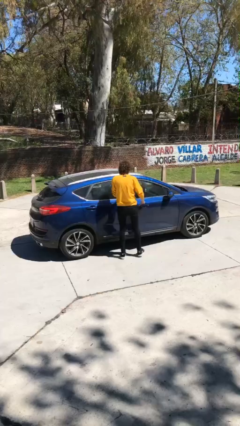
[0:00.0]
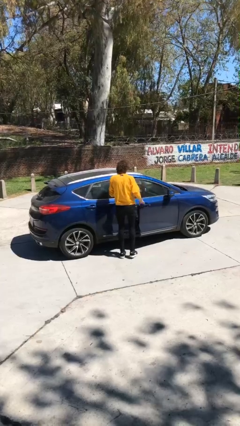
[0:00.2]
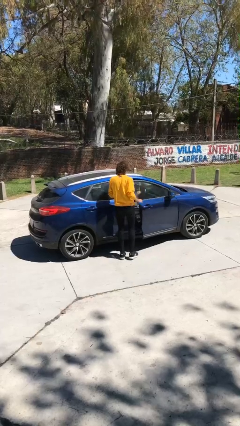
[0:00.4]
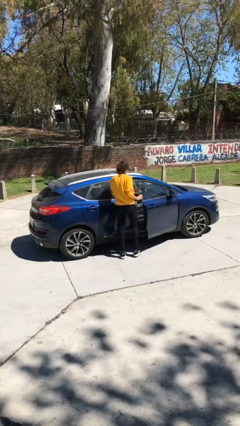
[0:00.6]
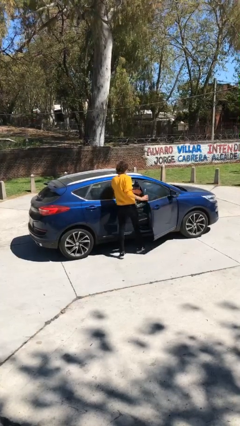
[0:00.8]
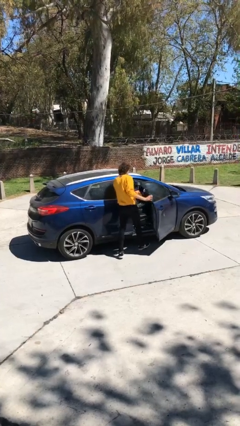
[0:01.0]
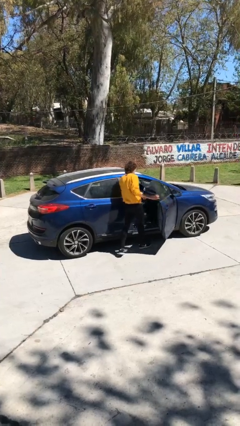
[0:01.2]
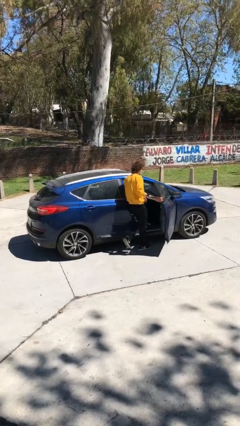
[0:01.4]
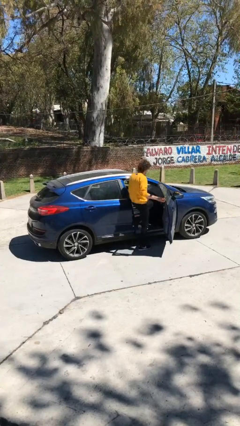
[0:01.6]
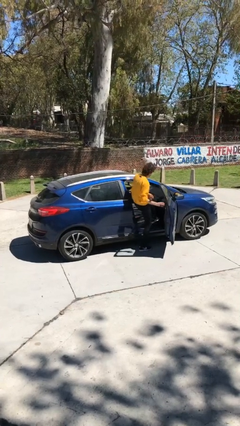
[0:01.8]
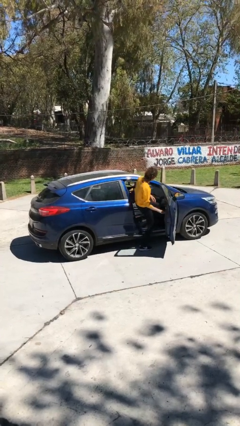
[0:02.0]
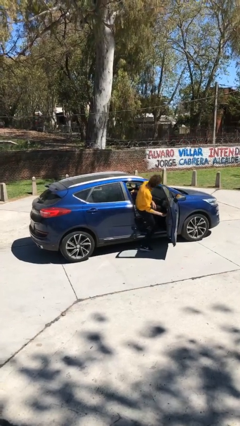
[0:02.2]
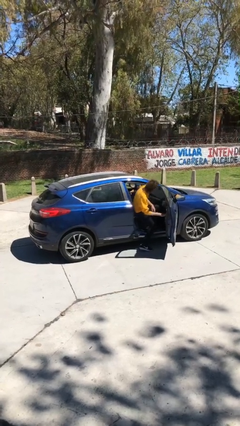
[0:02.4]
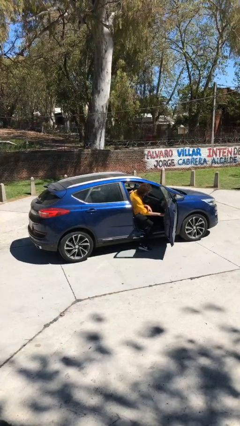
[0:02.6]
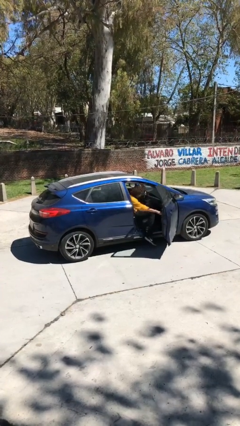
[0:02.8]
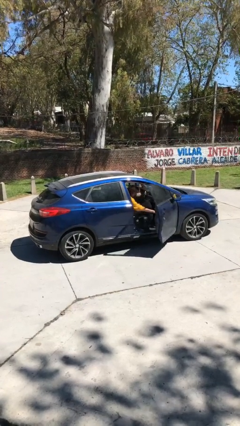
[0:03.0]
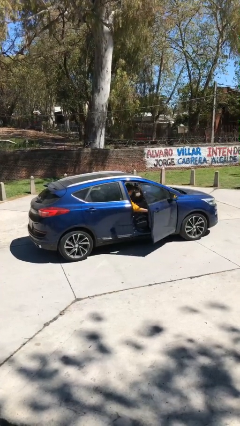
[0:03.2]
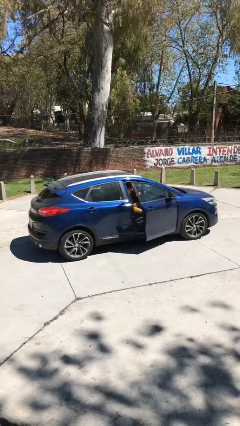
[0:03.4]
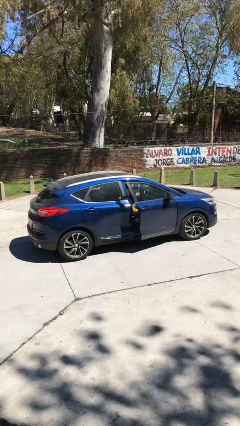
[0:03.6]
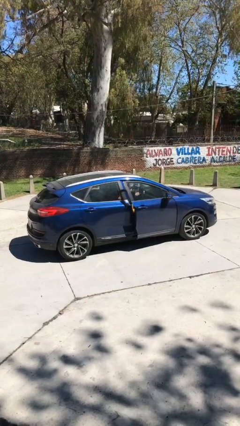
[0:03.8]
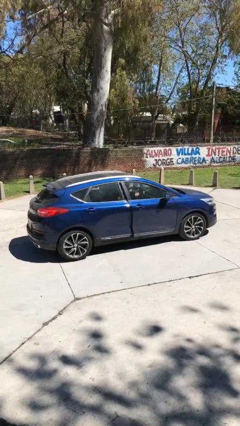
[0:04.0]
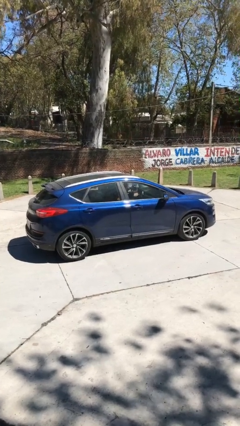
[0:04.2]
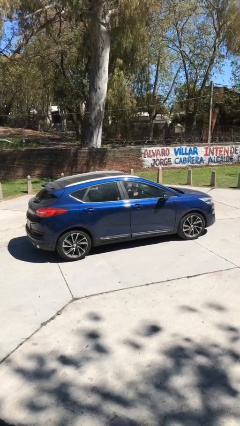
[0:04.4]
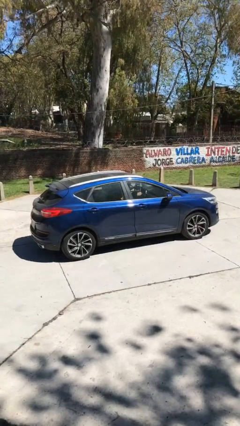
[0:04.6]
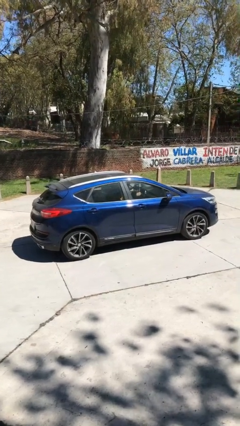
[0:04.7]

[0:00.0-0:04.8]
car picks up person

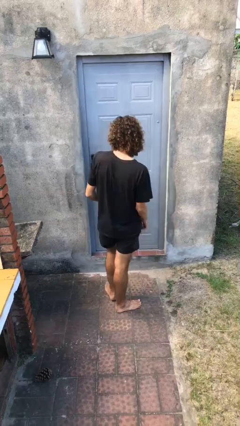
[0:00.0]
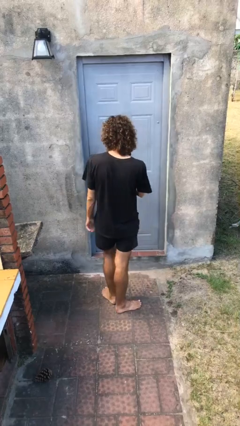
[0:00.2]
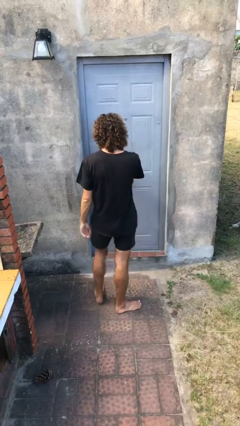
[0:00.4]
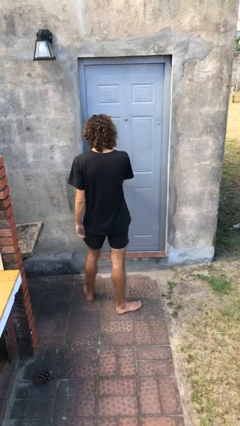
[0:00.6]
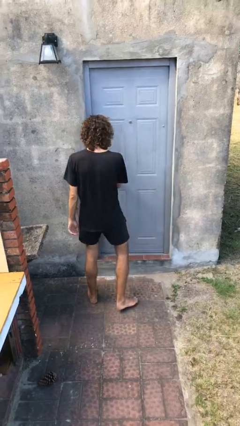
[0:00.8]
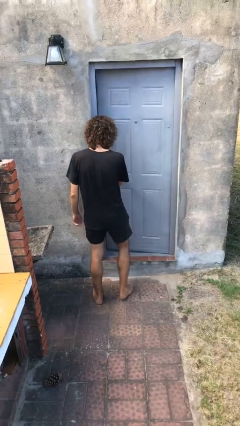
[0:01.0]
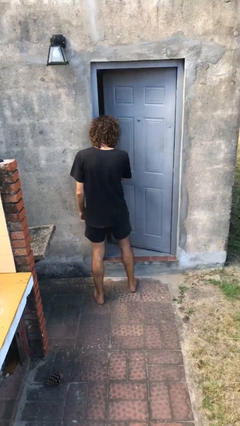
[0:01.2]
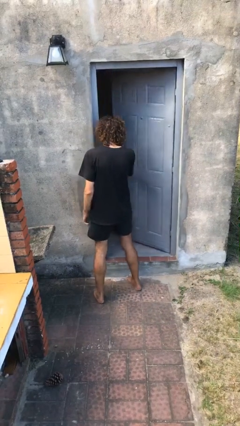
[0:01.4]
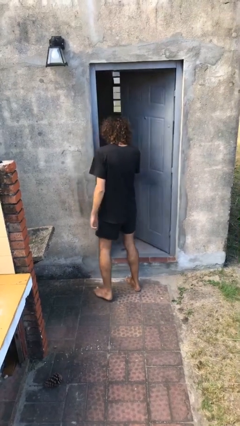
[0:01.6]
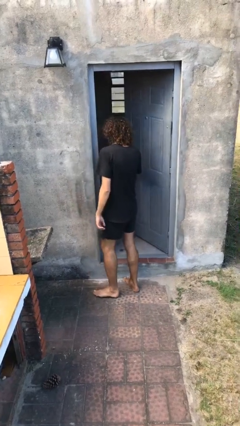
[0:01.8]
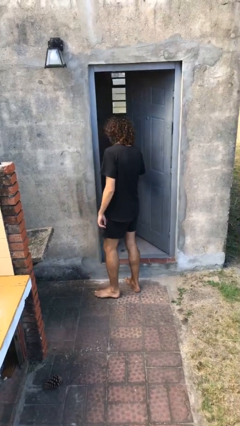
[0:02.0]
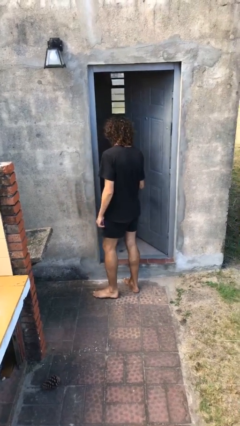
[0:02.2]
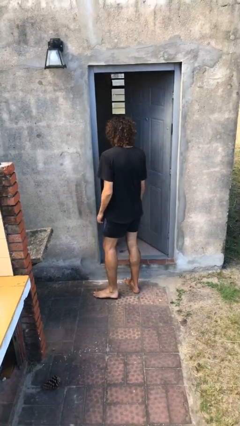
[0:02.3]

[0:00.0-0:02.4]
person opens facility door

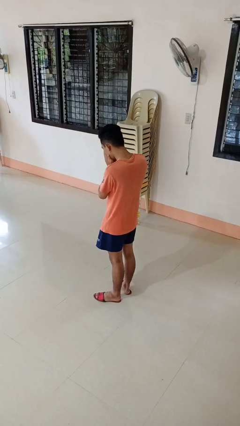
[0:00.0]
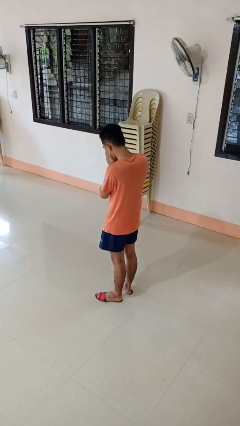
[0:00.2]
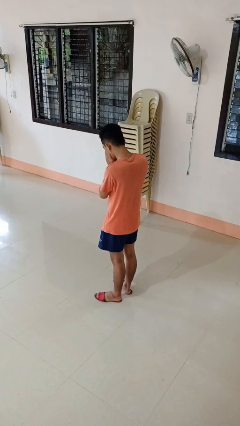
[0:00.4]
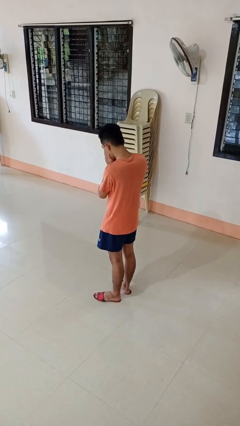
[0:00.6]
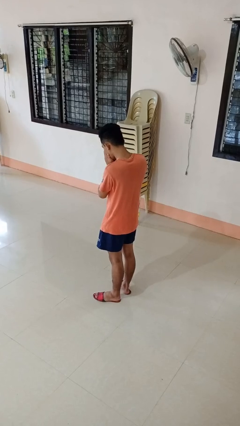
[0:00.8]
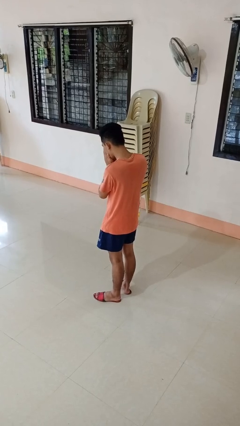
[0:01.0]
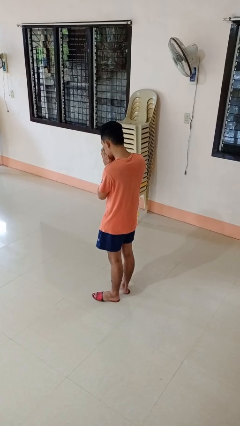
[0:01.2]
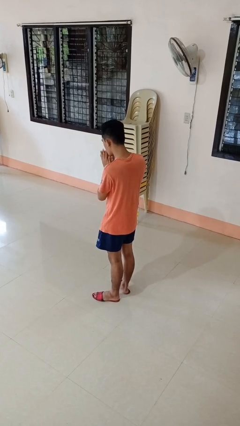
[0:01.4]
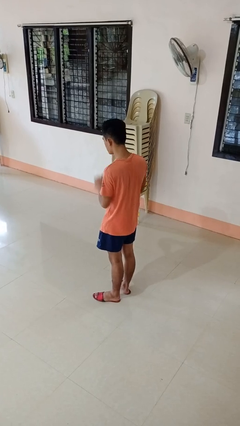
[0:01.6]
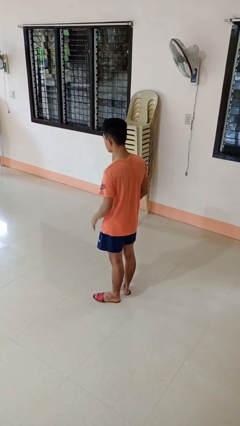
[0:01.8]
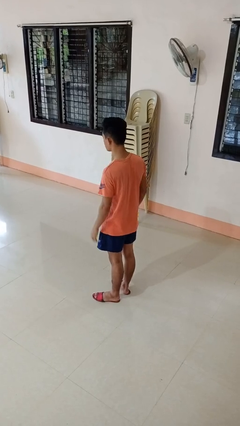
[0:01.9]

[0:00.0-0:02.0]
person sneezes into hand

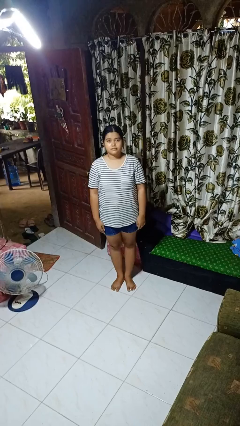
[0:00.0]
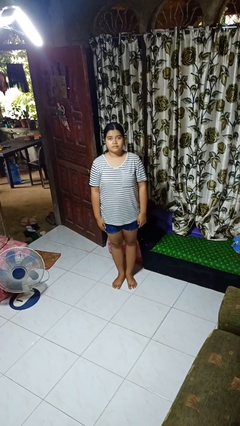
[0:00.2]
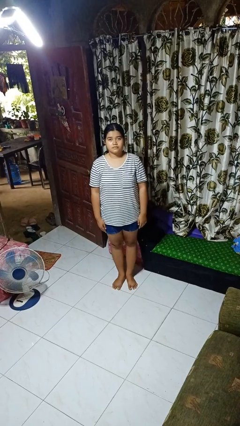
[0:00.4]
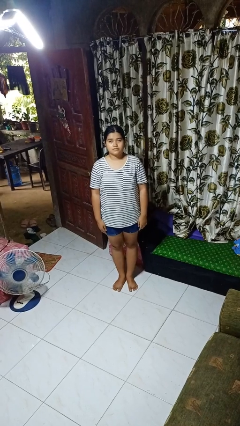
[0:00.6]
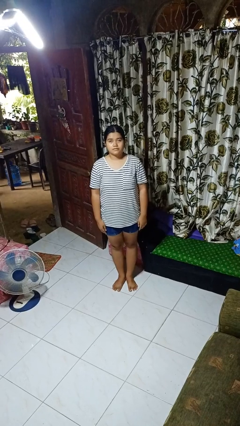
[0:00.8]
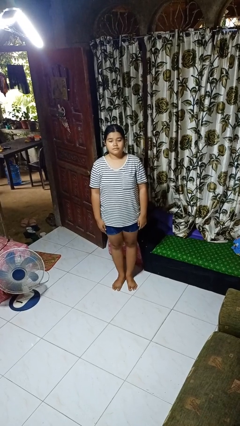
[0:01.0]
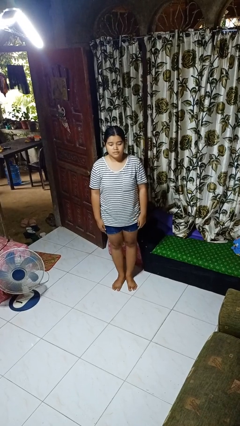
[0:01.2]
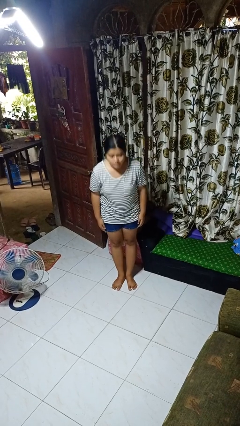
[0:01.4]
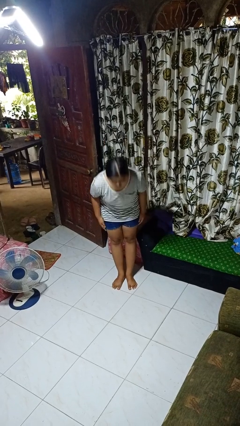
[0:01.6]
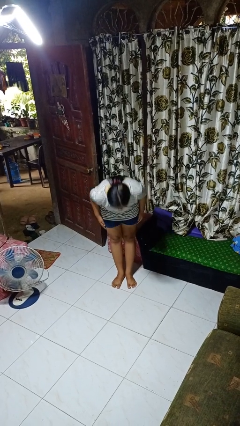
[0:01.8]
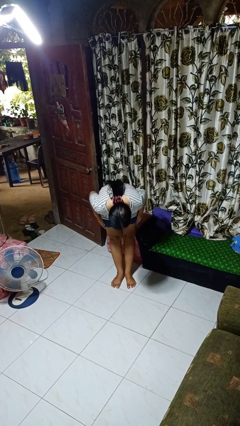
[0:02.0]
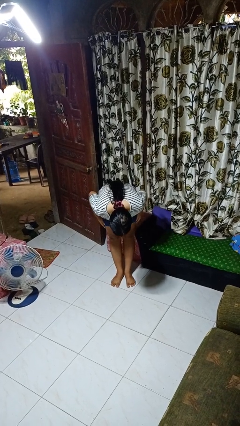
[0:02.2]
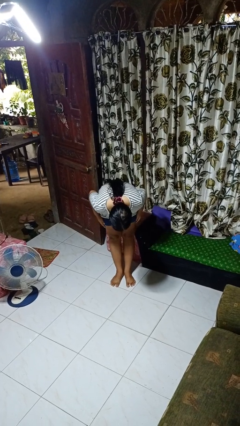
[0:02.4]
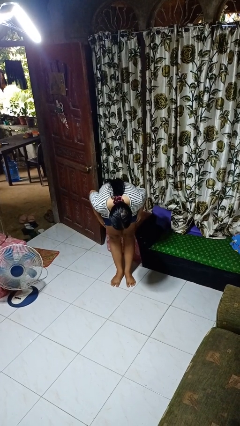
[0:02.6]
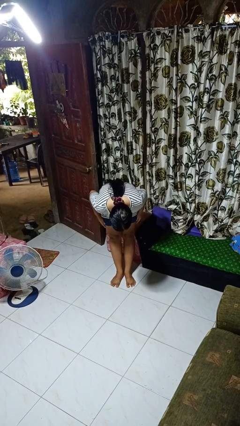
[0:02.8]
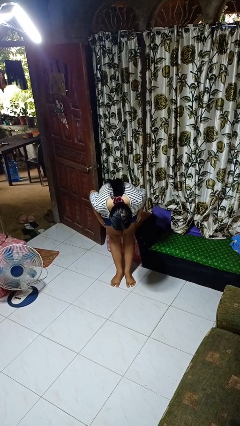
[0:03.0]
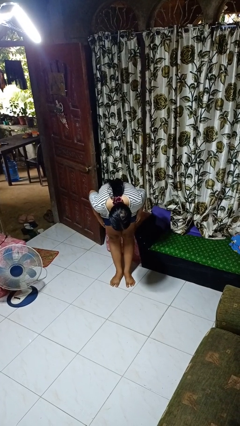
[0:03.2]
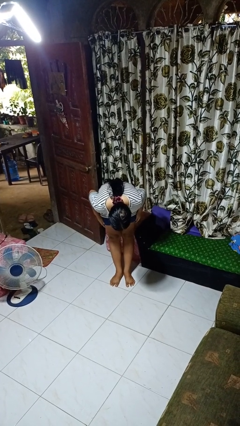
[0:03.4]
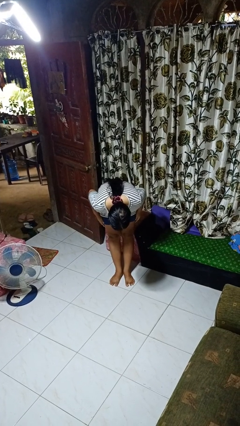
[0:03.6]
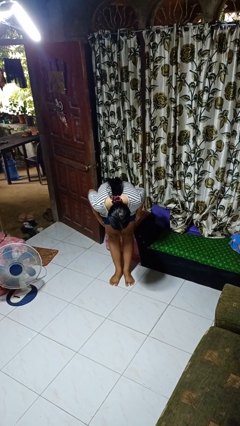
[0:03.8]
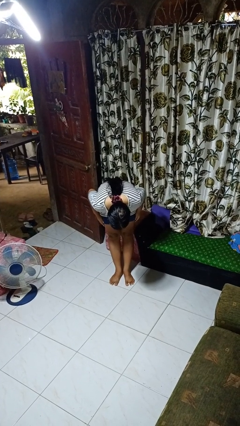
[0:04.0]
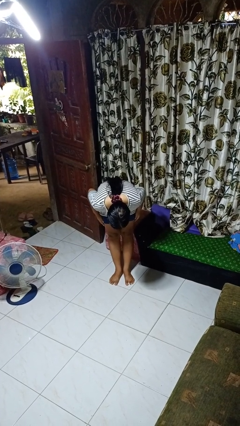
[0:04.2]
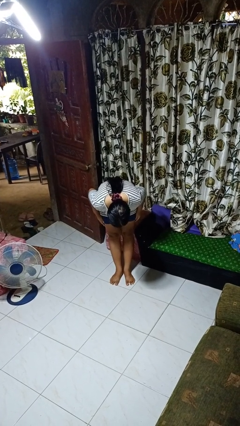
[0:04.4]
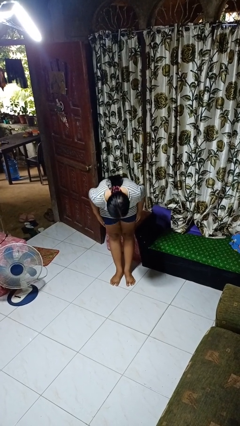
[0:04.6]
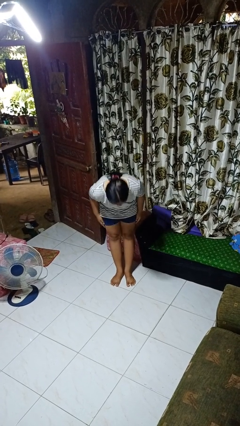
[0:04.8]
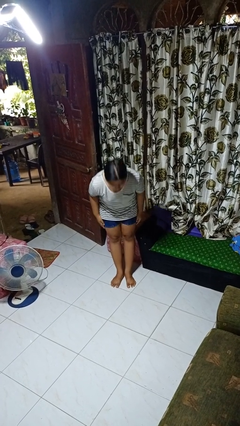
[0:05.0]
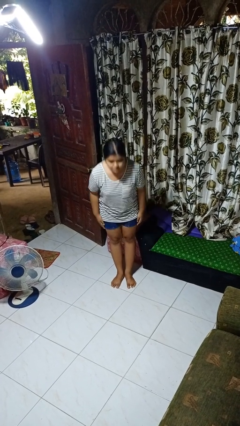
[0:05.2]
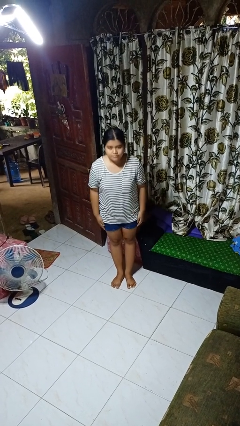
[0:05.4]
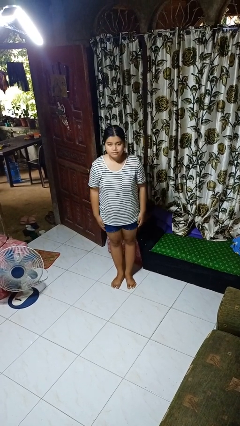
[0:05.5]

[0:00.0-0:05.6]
person bows

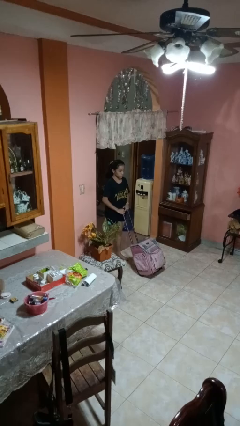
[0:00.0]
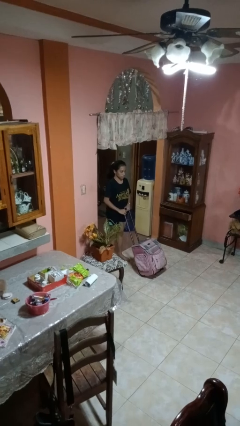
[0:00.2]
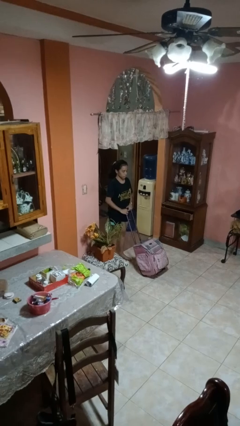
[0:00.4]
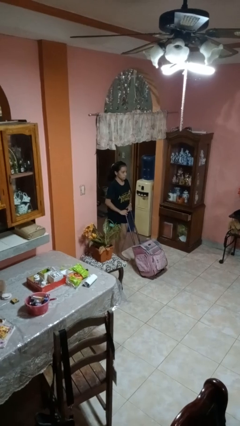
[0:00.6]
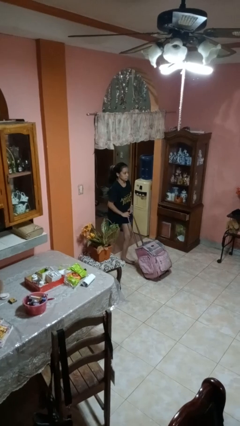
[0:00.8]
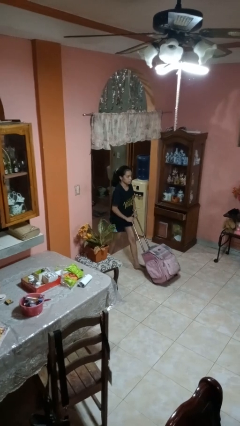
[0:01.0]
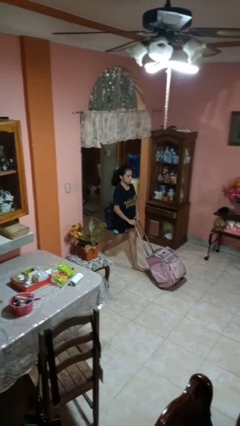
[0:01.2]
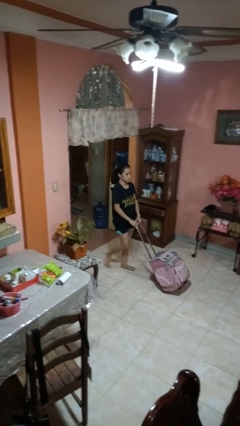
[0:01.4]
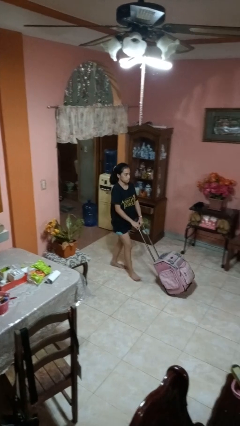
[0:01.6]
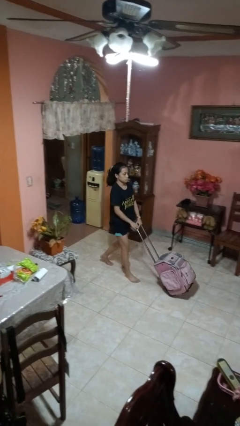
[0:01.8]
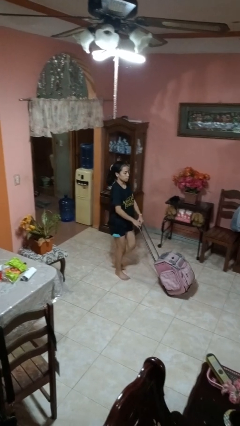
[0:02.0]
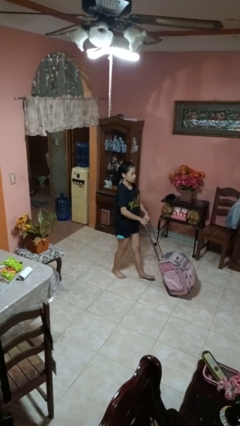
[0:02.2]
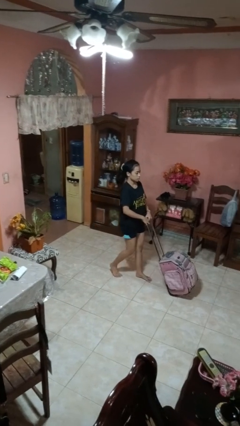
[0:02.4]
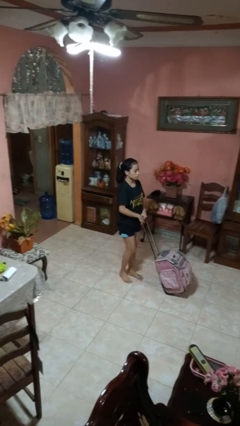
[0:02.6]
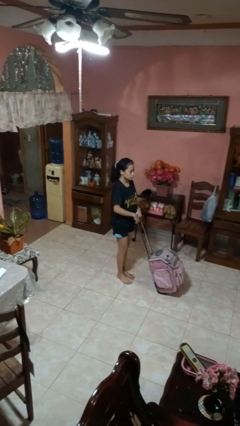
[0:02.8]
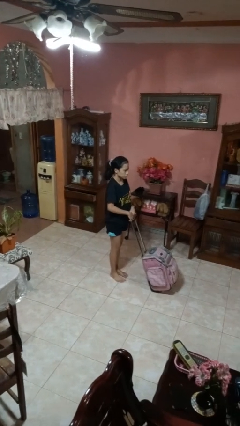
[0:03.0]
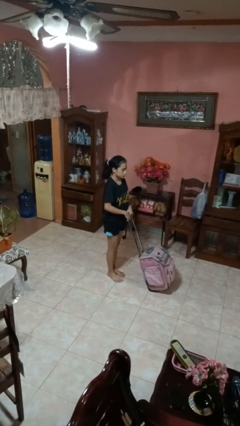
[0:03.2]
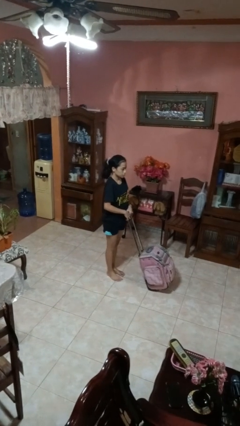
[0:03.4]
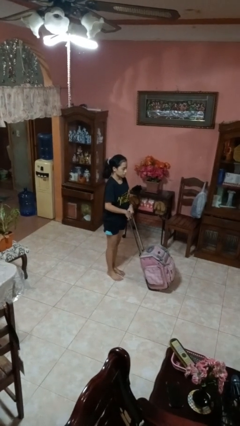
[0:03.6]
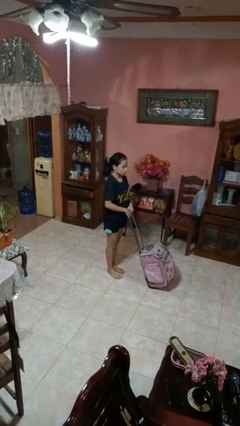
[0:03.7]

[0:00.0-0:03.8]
person pushes wheeled cart
